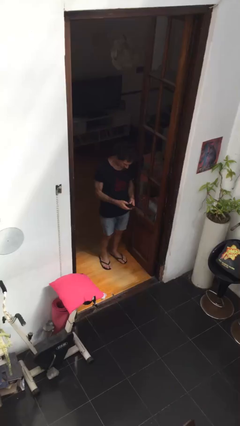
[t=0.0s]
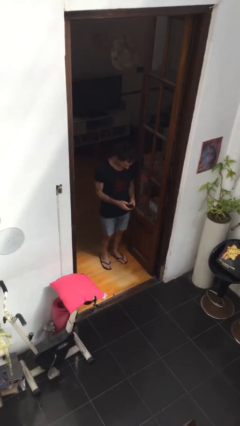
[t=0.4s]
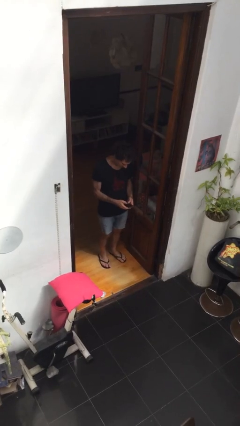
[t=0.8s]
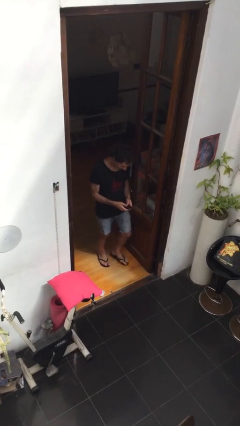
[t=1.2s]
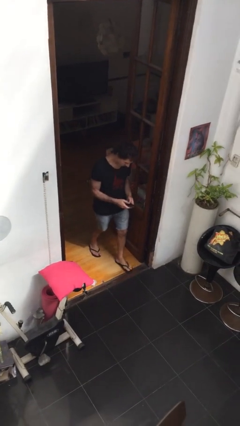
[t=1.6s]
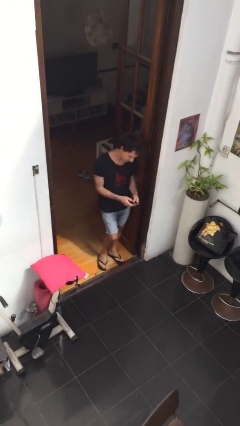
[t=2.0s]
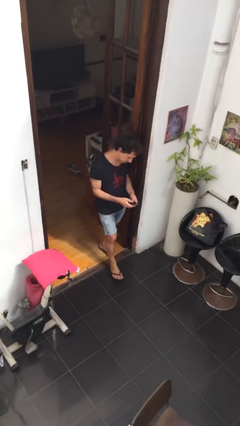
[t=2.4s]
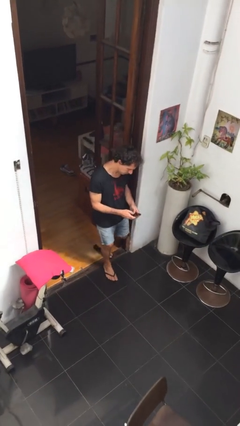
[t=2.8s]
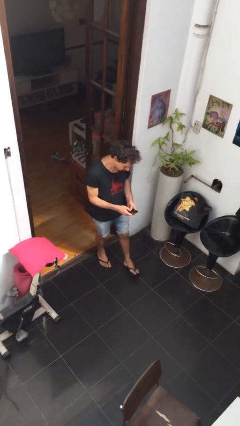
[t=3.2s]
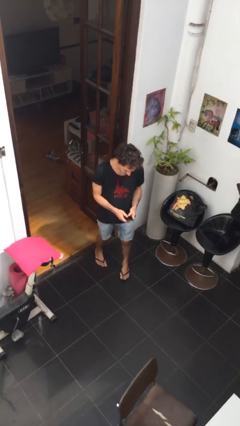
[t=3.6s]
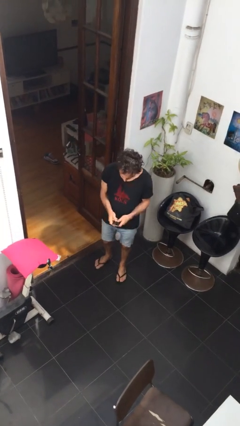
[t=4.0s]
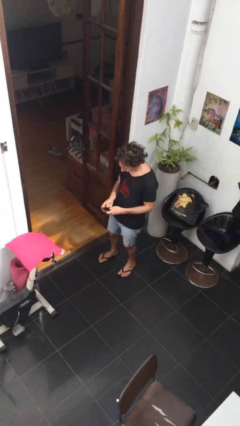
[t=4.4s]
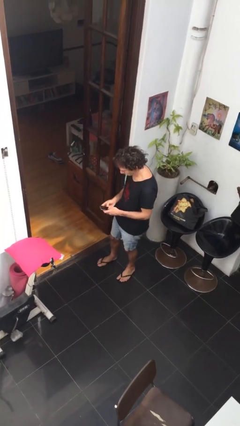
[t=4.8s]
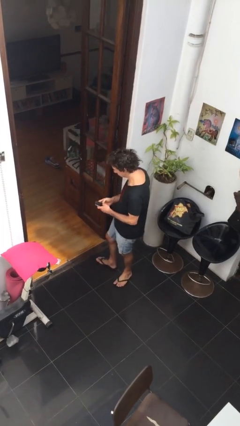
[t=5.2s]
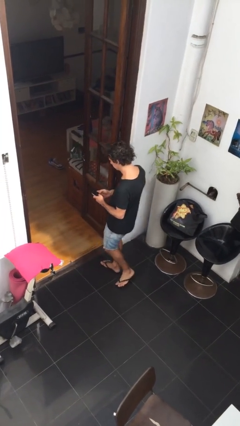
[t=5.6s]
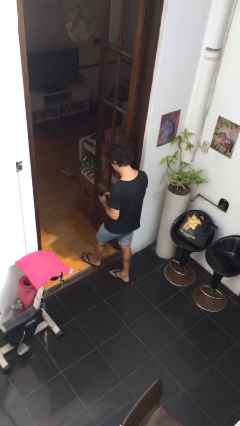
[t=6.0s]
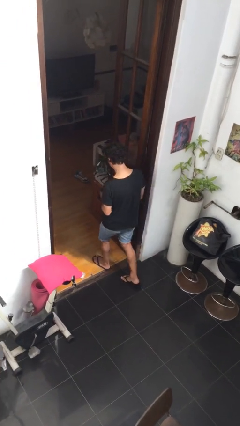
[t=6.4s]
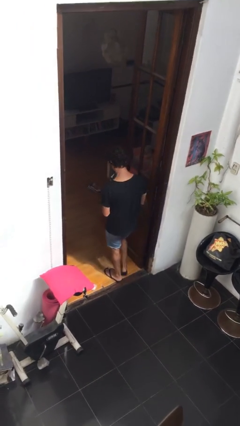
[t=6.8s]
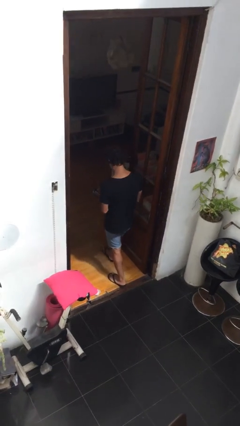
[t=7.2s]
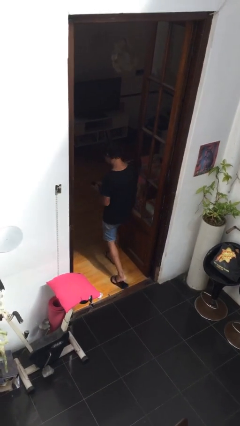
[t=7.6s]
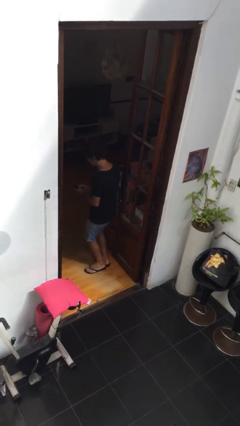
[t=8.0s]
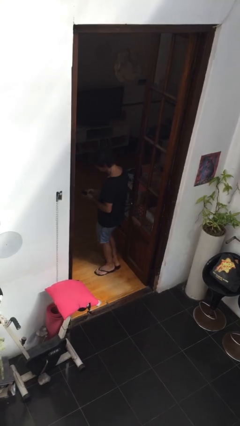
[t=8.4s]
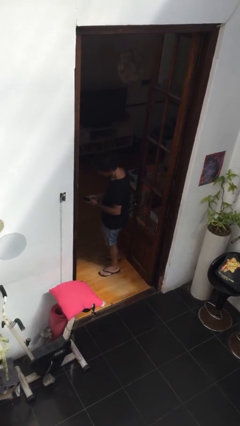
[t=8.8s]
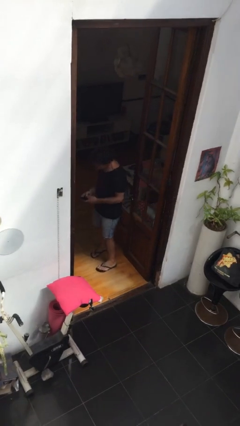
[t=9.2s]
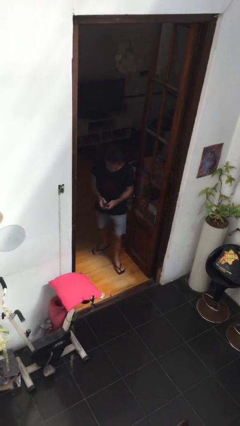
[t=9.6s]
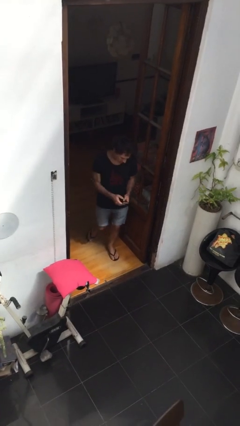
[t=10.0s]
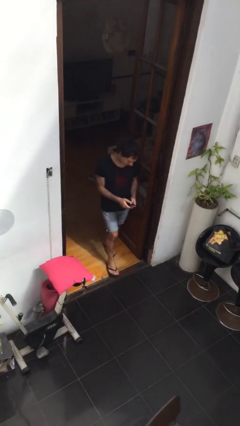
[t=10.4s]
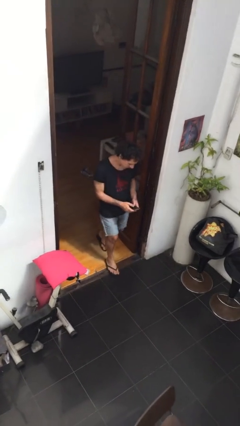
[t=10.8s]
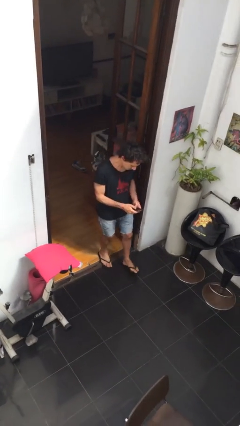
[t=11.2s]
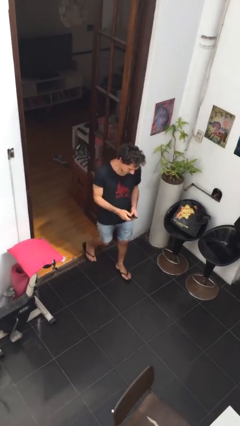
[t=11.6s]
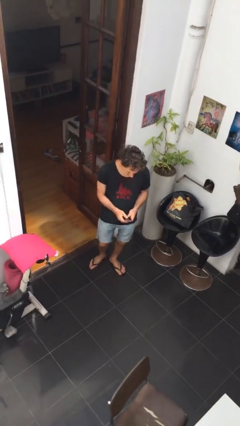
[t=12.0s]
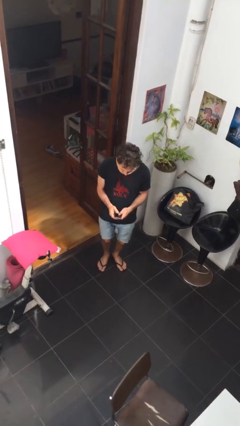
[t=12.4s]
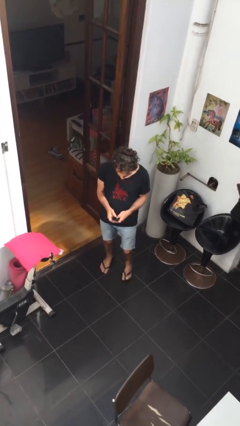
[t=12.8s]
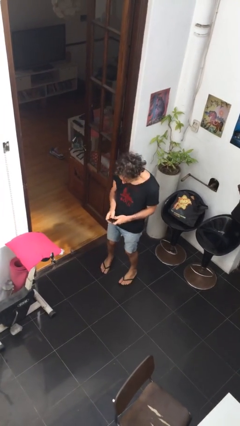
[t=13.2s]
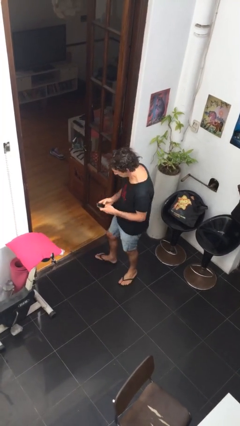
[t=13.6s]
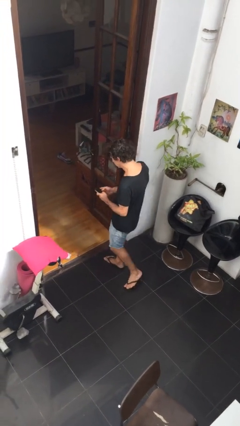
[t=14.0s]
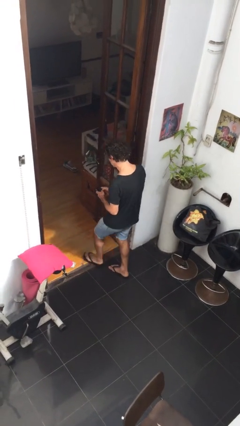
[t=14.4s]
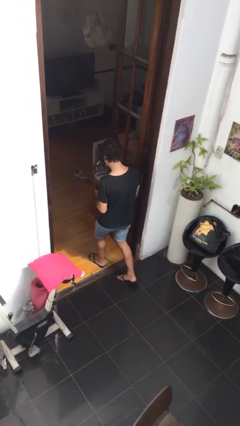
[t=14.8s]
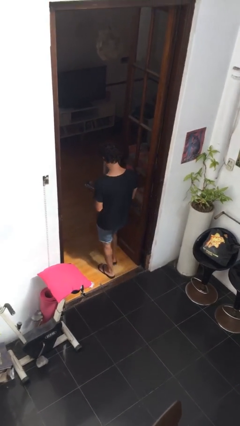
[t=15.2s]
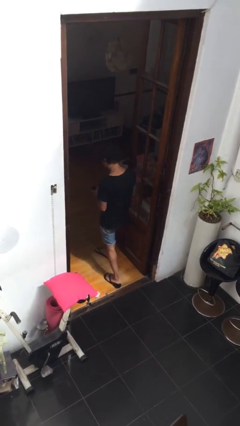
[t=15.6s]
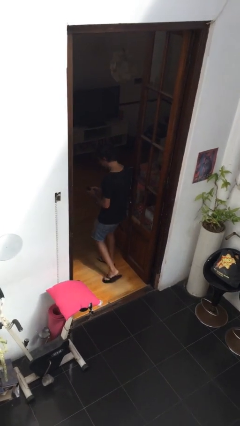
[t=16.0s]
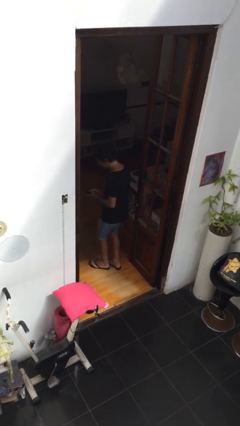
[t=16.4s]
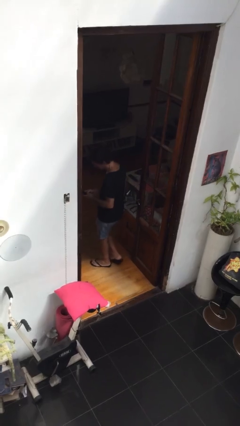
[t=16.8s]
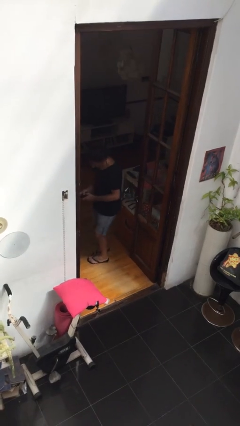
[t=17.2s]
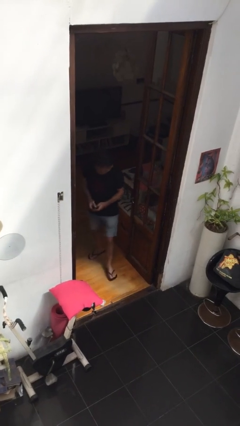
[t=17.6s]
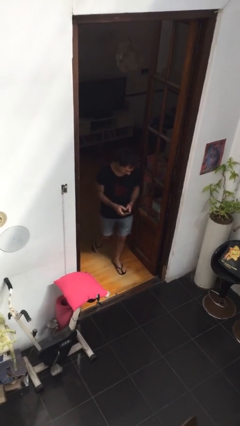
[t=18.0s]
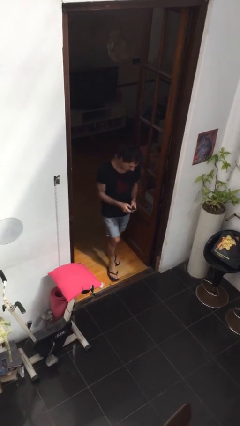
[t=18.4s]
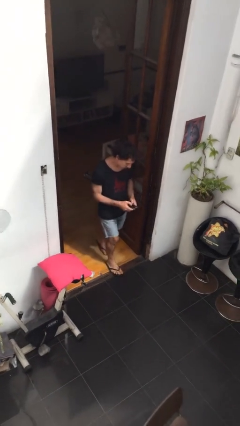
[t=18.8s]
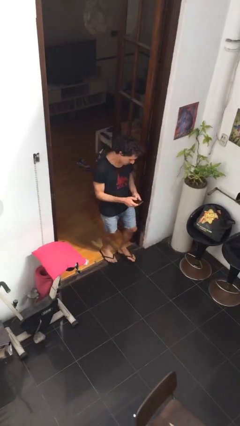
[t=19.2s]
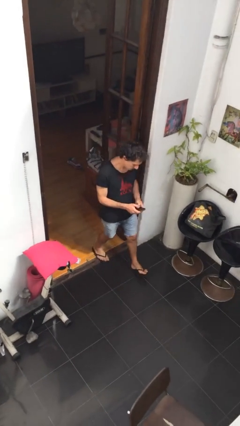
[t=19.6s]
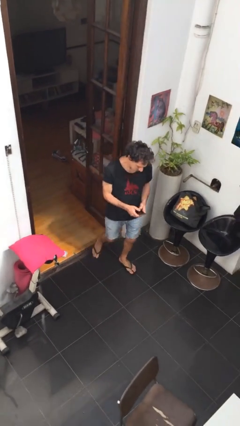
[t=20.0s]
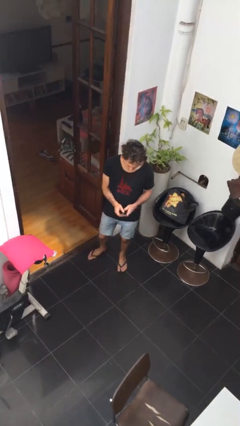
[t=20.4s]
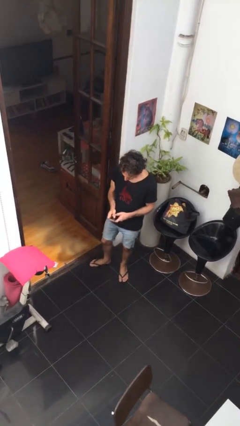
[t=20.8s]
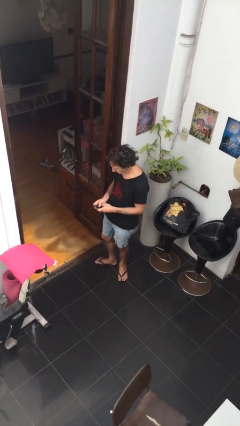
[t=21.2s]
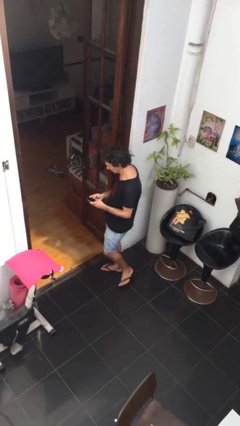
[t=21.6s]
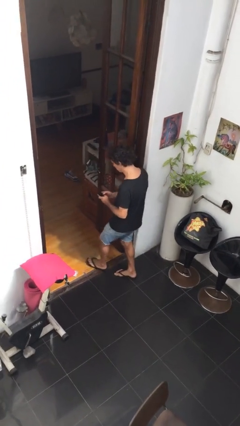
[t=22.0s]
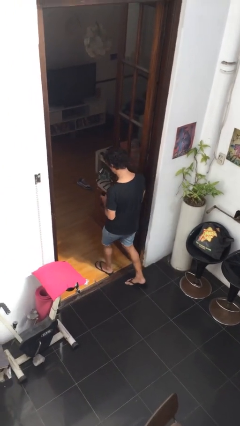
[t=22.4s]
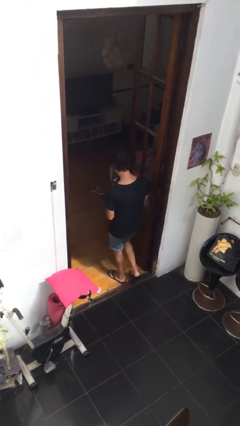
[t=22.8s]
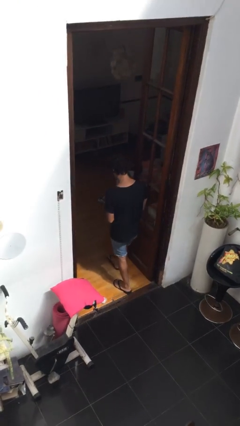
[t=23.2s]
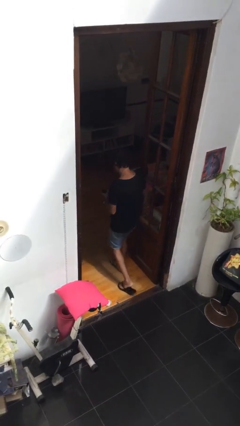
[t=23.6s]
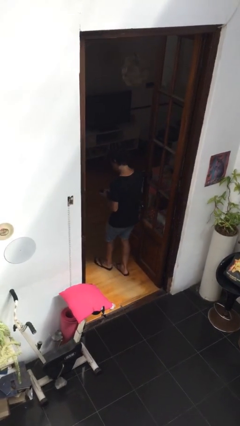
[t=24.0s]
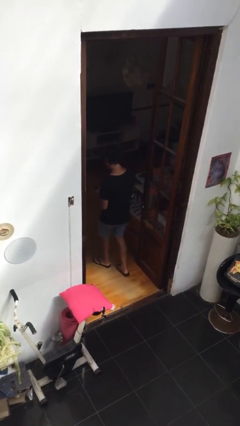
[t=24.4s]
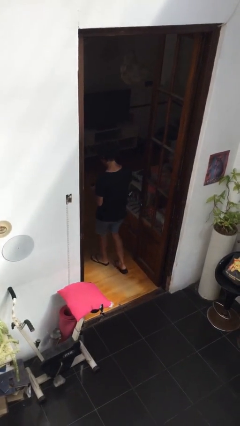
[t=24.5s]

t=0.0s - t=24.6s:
person texts on phone

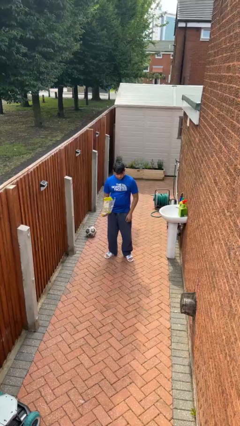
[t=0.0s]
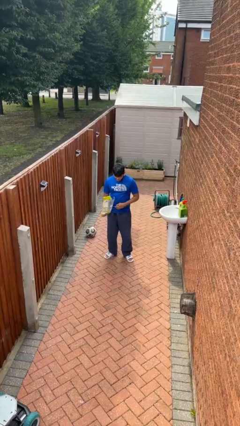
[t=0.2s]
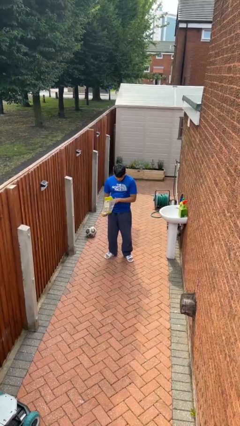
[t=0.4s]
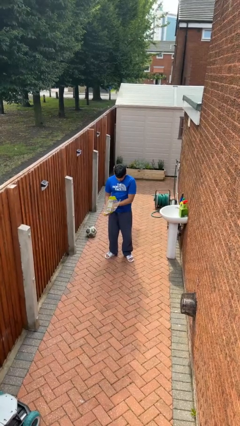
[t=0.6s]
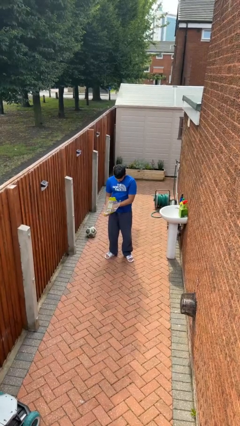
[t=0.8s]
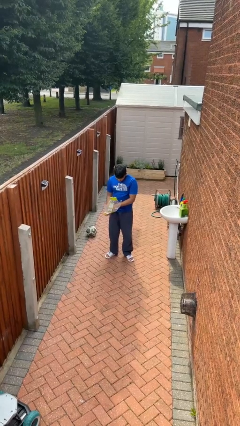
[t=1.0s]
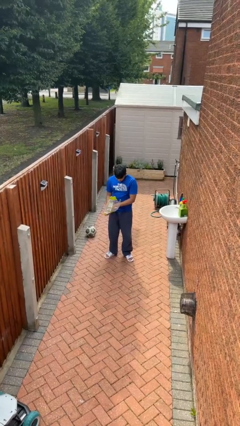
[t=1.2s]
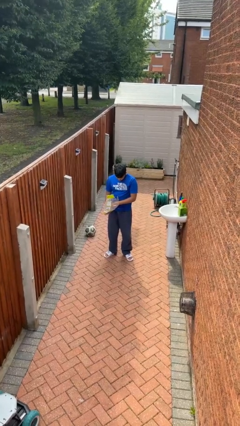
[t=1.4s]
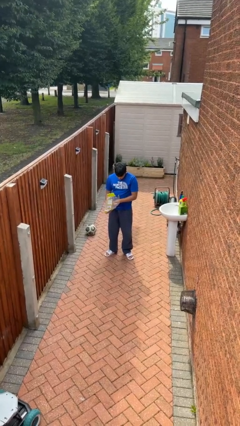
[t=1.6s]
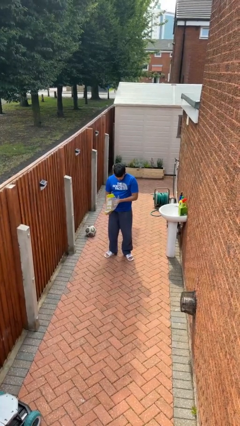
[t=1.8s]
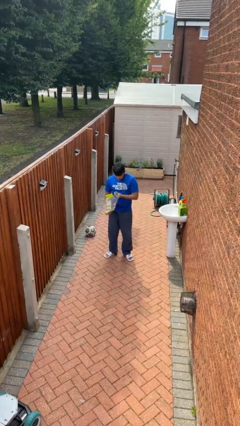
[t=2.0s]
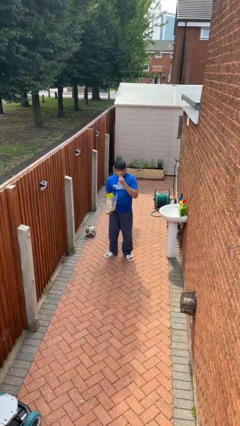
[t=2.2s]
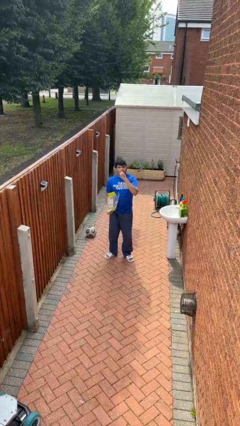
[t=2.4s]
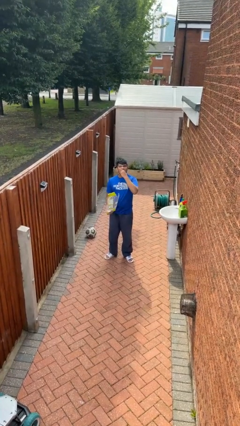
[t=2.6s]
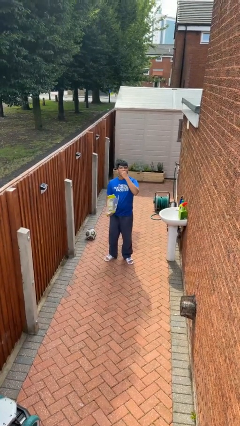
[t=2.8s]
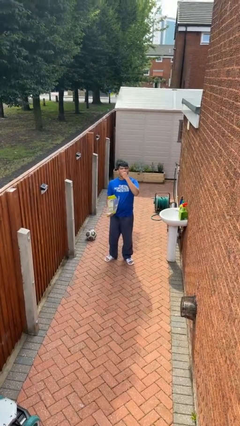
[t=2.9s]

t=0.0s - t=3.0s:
person eats snack from bag

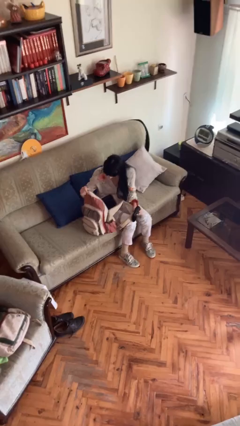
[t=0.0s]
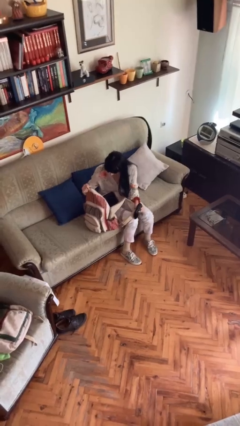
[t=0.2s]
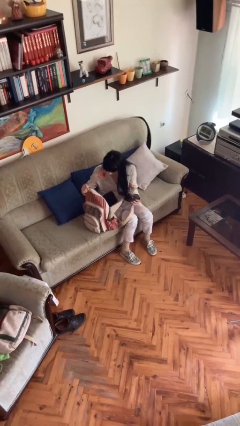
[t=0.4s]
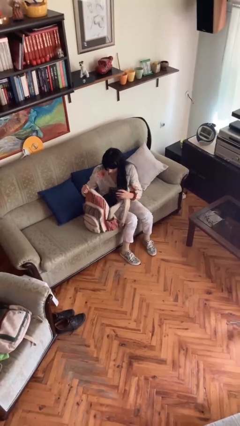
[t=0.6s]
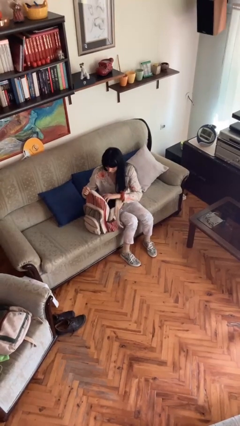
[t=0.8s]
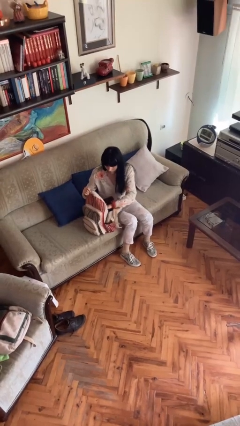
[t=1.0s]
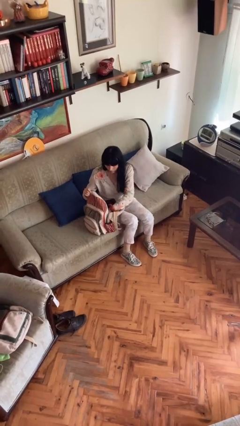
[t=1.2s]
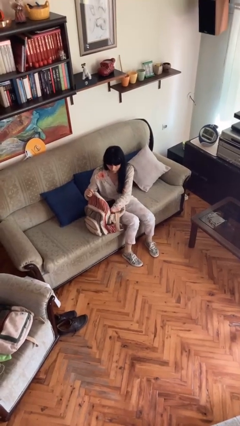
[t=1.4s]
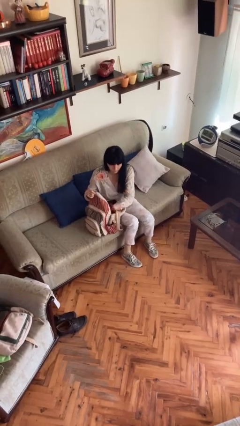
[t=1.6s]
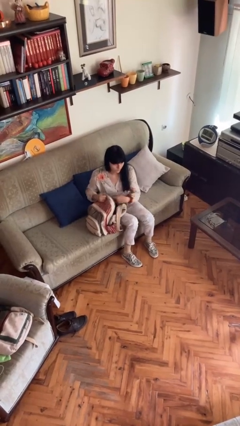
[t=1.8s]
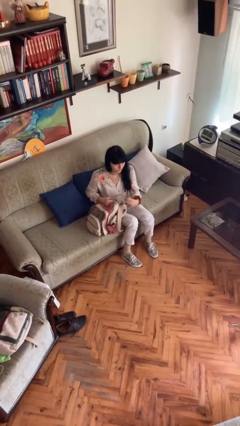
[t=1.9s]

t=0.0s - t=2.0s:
person puts object into backpack
